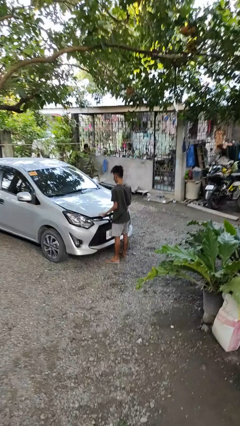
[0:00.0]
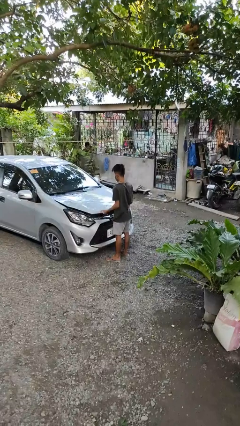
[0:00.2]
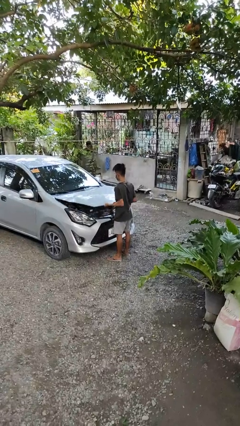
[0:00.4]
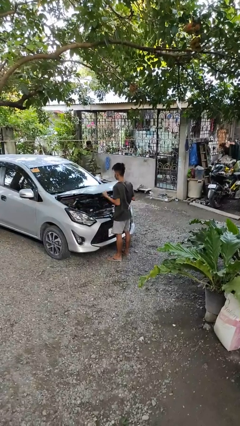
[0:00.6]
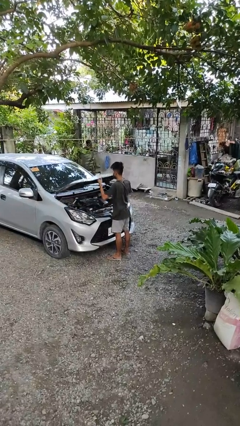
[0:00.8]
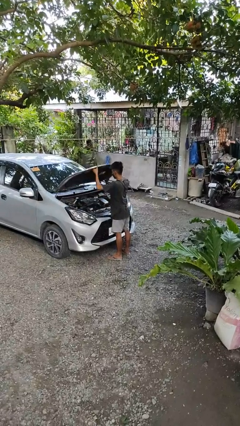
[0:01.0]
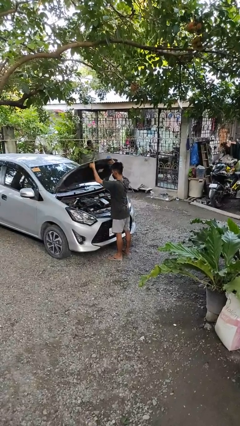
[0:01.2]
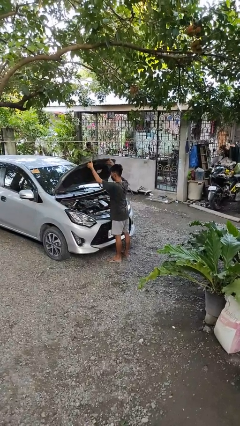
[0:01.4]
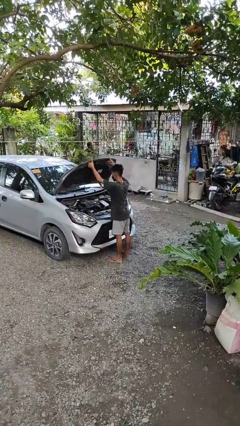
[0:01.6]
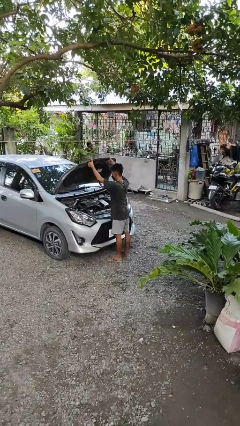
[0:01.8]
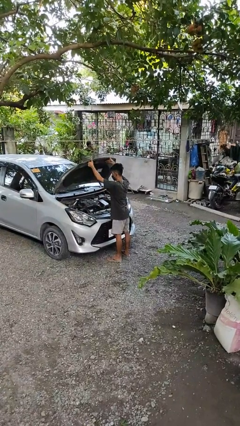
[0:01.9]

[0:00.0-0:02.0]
person opens car hood

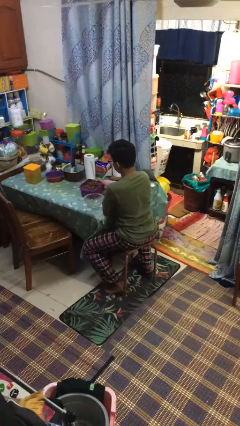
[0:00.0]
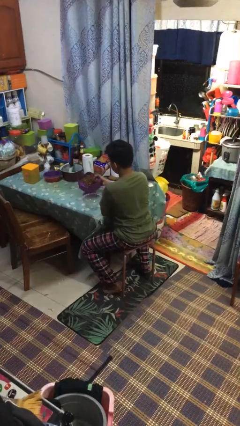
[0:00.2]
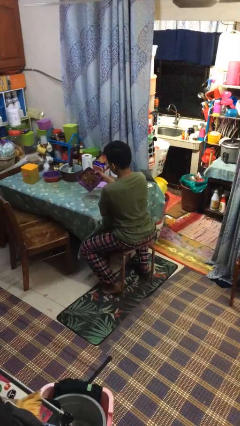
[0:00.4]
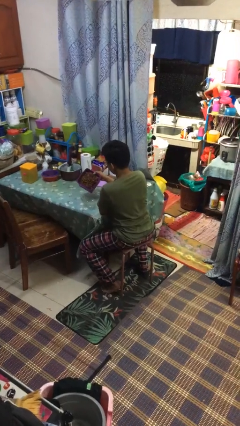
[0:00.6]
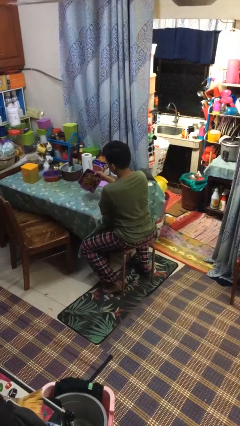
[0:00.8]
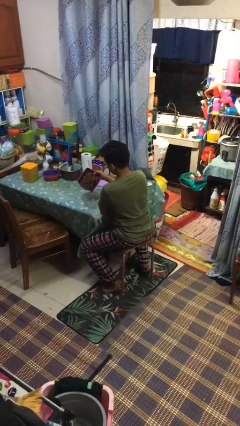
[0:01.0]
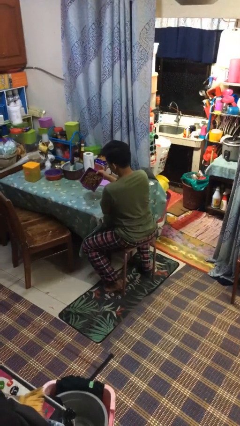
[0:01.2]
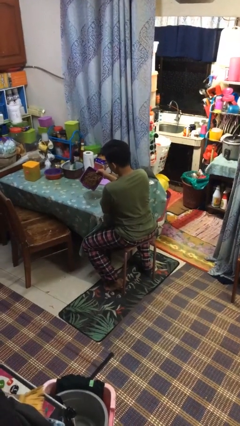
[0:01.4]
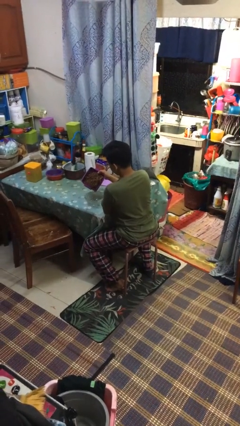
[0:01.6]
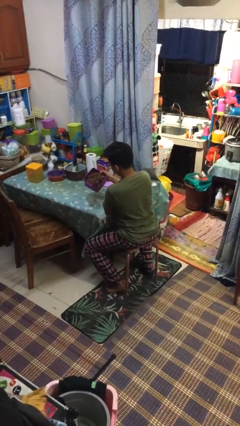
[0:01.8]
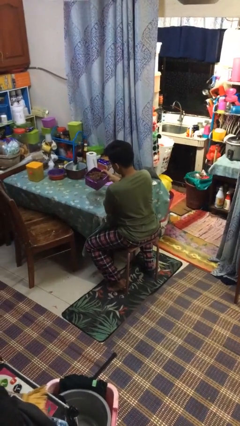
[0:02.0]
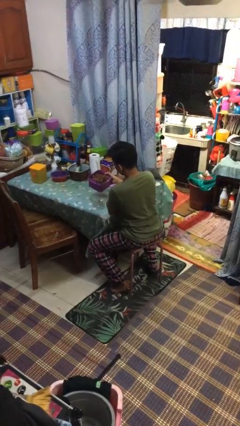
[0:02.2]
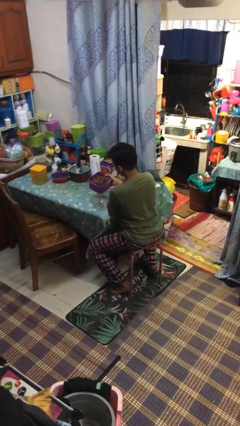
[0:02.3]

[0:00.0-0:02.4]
person pours into bowl

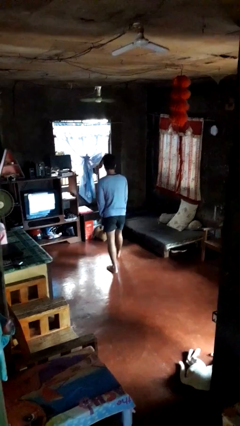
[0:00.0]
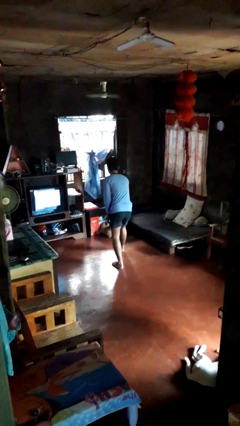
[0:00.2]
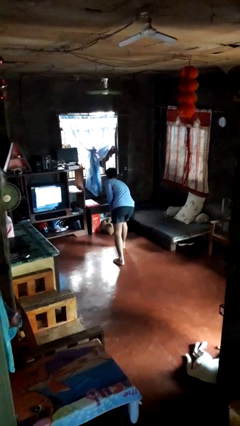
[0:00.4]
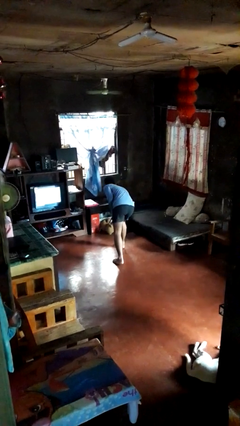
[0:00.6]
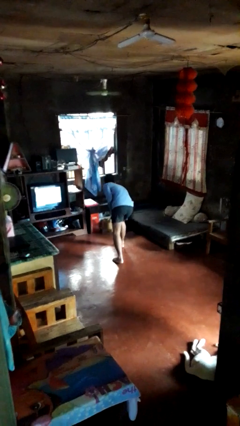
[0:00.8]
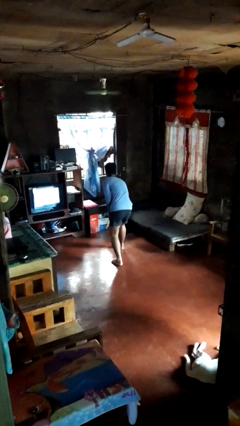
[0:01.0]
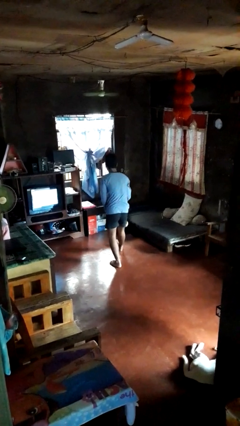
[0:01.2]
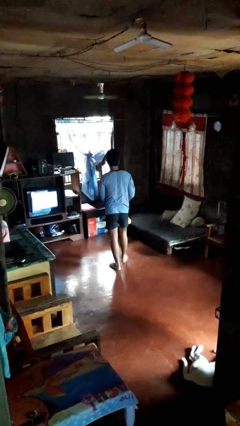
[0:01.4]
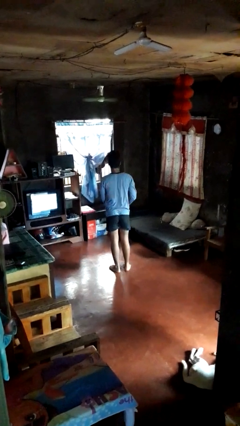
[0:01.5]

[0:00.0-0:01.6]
person picks up object from floor

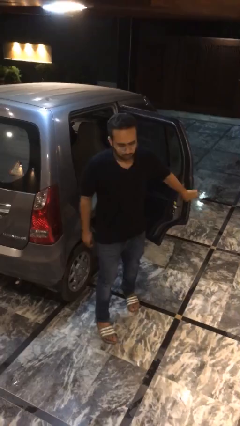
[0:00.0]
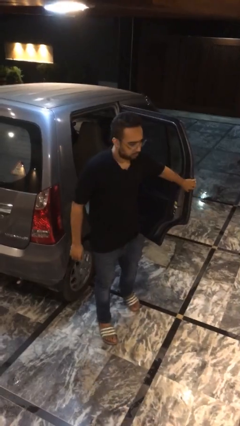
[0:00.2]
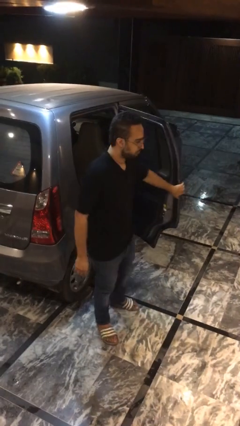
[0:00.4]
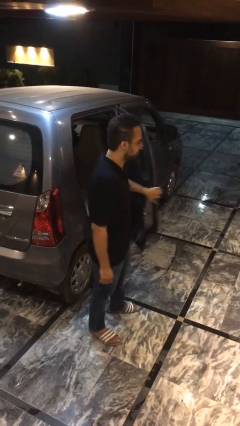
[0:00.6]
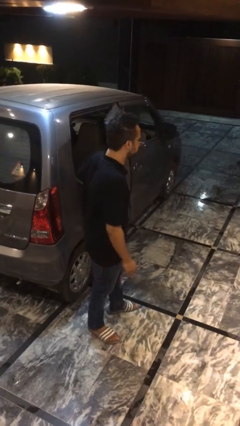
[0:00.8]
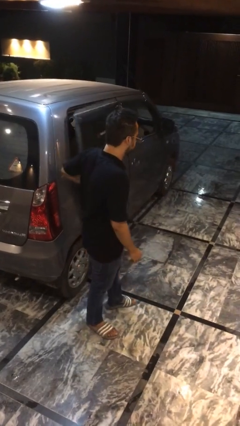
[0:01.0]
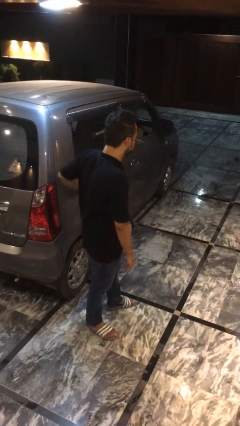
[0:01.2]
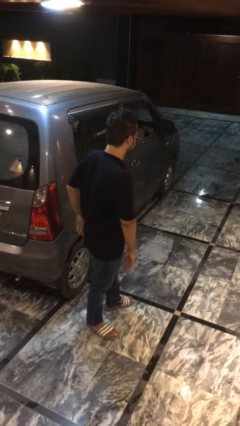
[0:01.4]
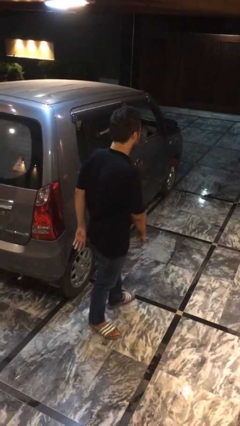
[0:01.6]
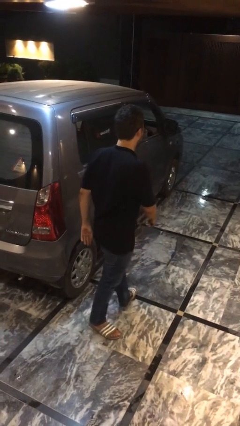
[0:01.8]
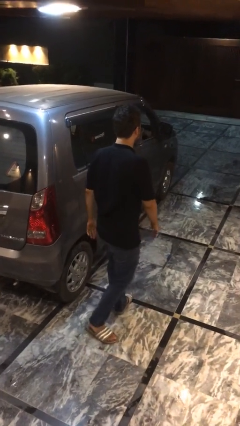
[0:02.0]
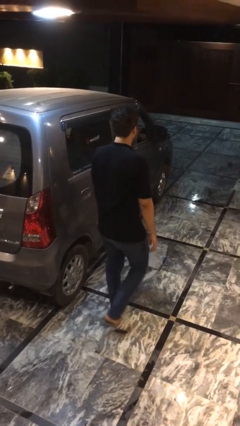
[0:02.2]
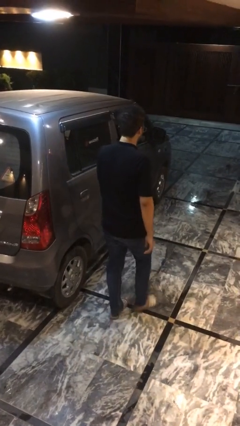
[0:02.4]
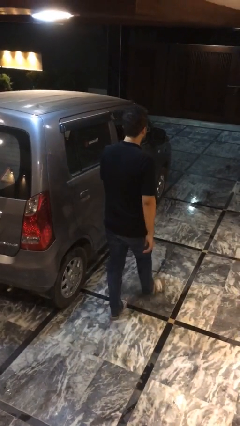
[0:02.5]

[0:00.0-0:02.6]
person closes car door

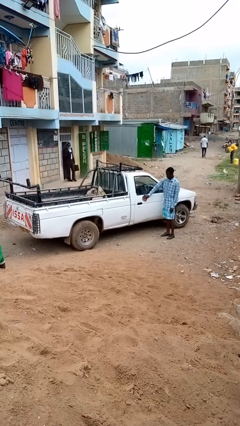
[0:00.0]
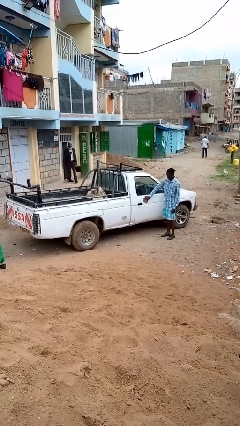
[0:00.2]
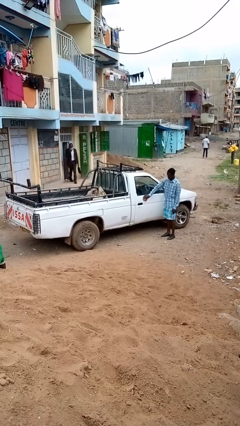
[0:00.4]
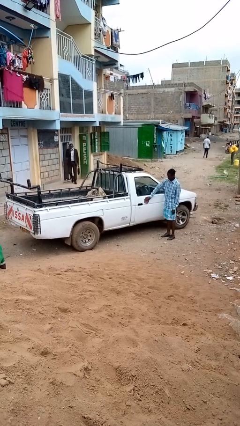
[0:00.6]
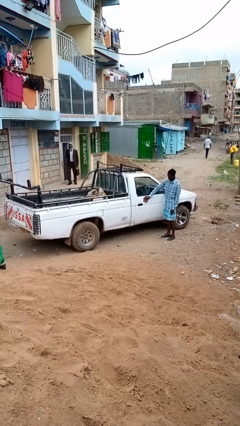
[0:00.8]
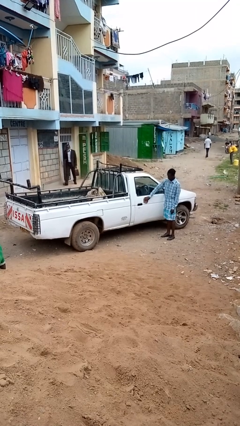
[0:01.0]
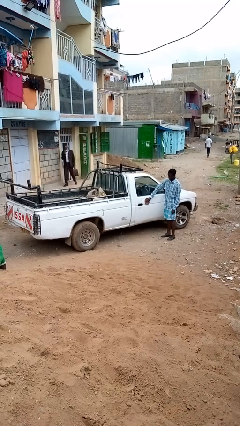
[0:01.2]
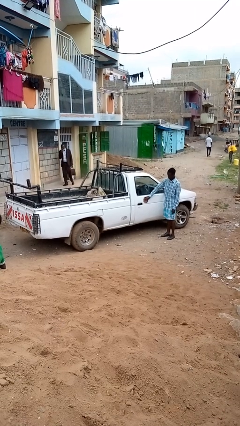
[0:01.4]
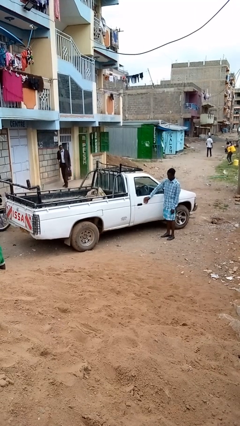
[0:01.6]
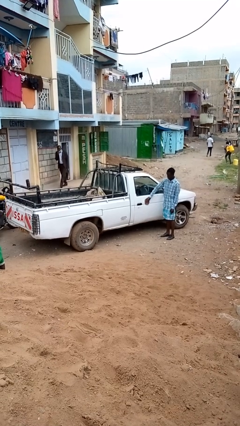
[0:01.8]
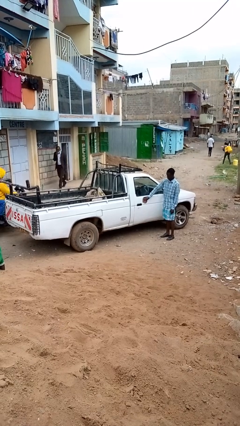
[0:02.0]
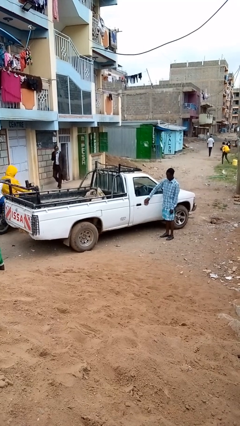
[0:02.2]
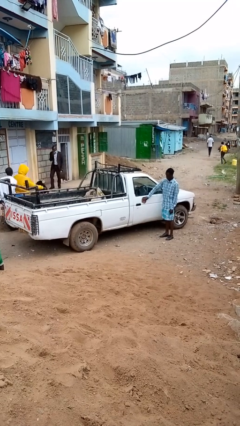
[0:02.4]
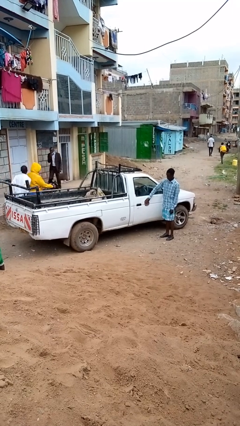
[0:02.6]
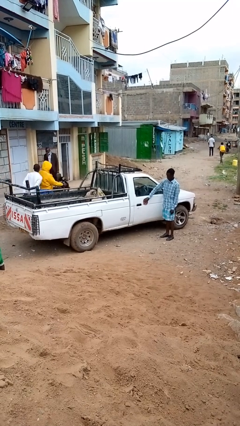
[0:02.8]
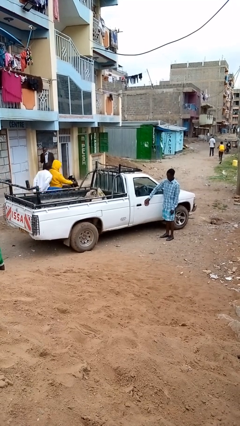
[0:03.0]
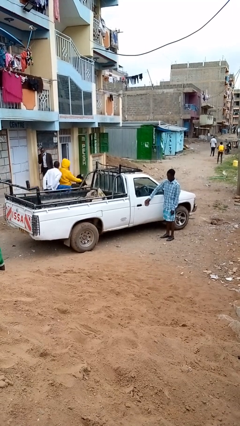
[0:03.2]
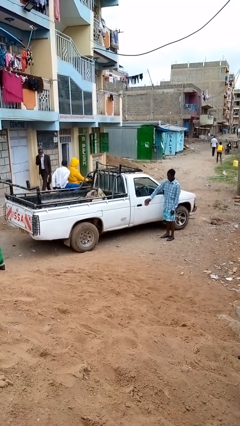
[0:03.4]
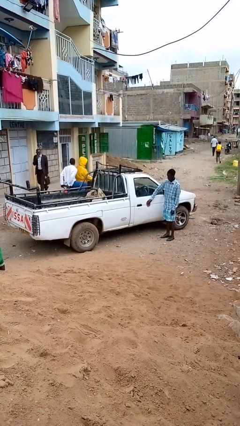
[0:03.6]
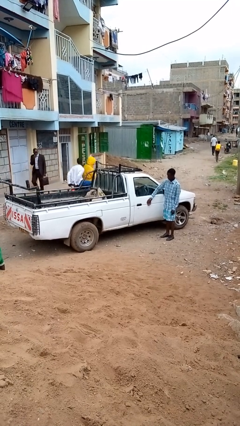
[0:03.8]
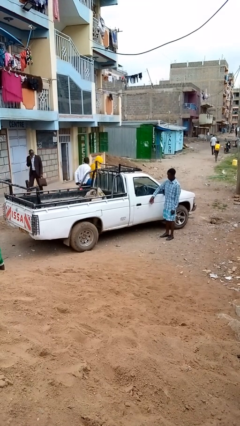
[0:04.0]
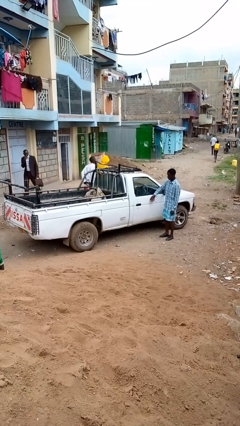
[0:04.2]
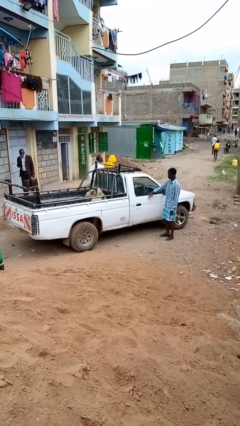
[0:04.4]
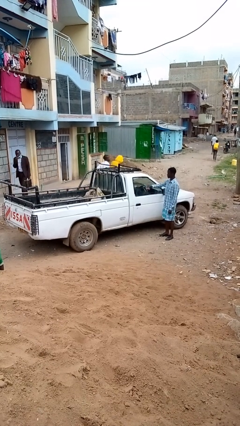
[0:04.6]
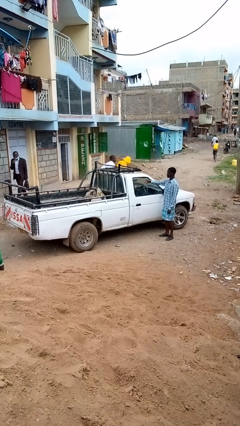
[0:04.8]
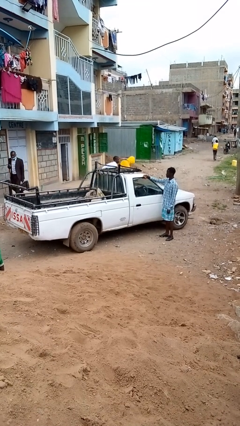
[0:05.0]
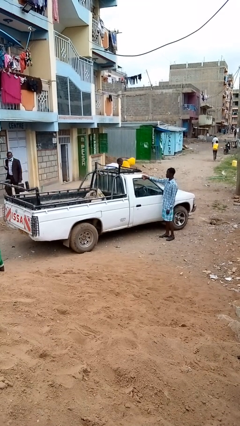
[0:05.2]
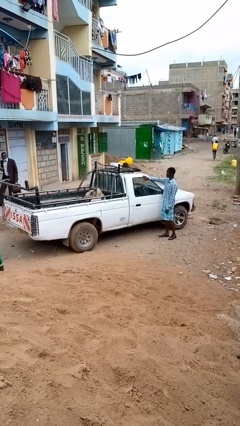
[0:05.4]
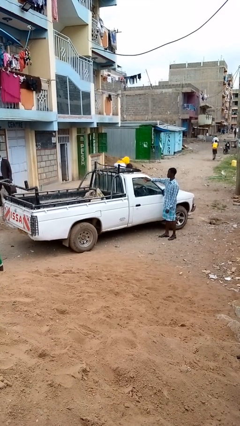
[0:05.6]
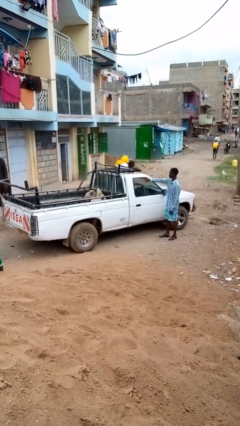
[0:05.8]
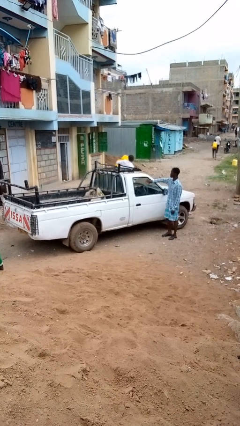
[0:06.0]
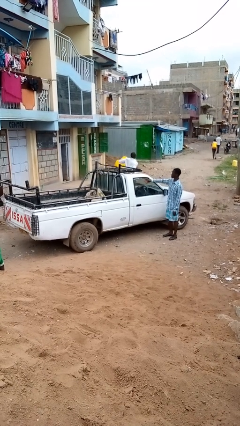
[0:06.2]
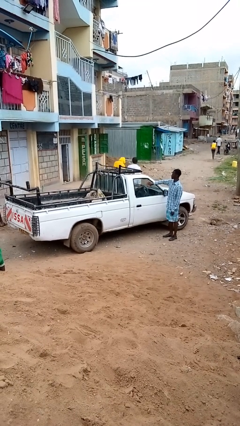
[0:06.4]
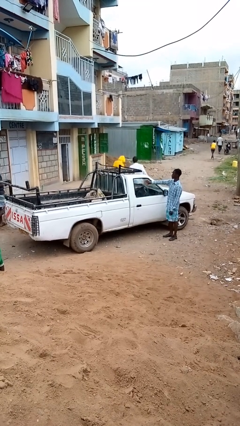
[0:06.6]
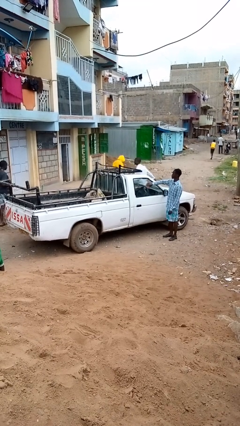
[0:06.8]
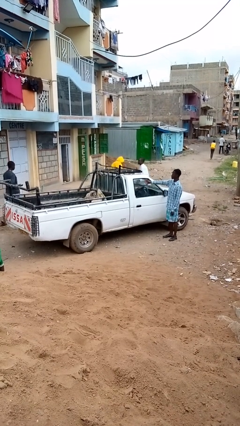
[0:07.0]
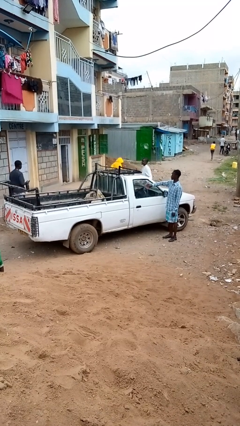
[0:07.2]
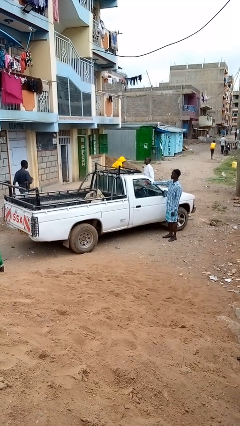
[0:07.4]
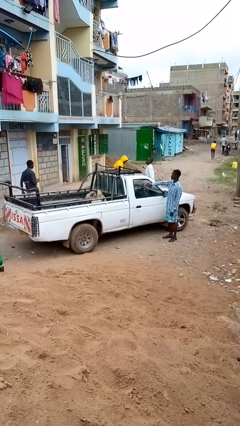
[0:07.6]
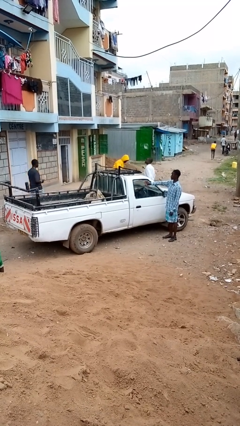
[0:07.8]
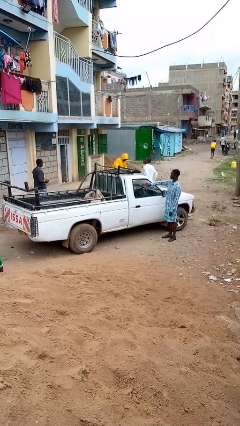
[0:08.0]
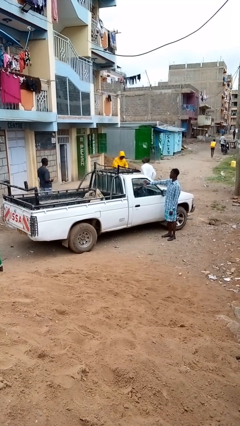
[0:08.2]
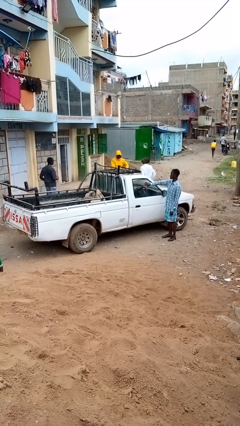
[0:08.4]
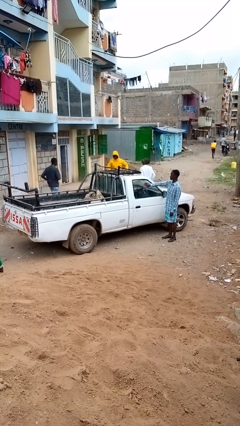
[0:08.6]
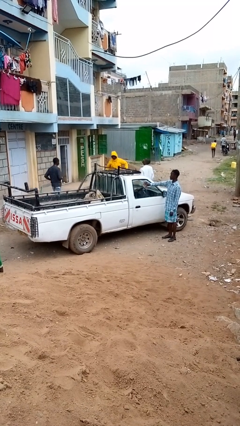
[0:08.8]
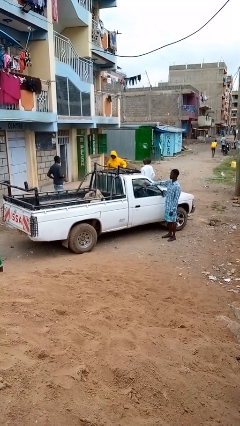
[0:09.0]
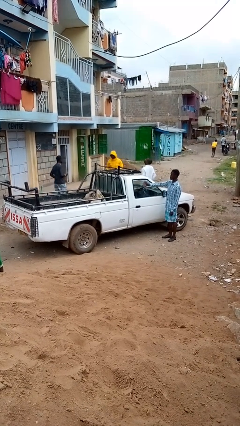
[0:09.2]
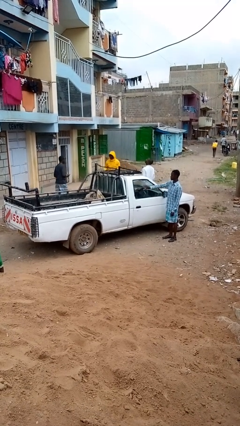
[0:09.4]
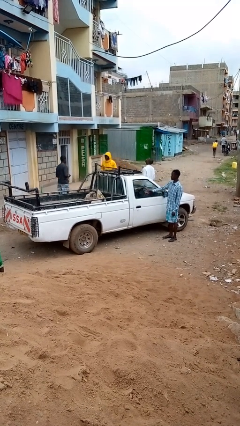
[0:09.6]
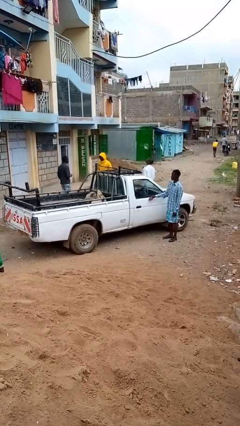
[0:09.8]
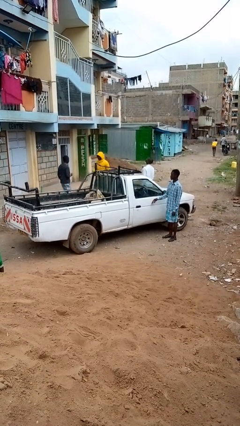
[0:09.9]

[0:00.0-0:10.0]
person polishes car with rag
